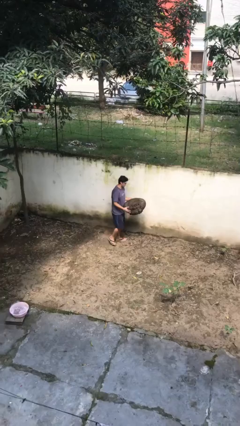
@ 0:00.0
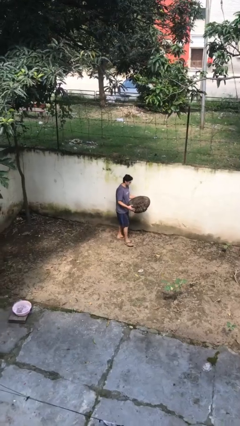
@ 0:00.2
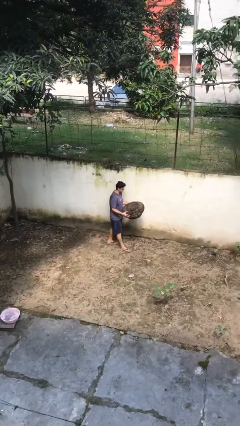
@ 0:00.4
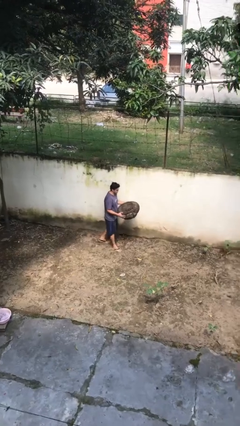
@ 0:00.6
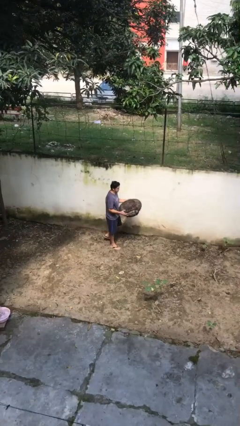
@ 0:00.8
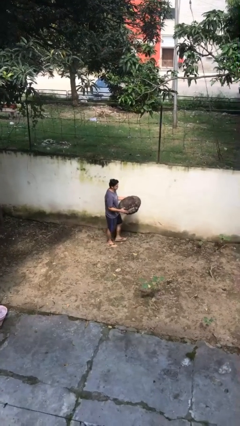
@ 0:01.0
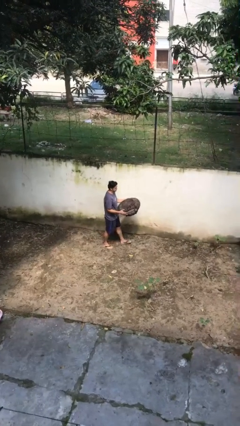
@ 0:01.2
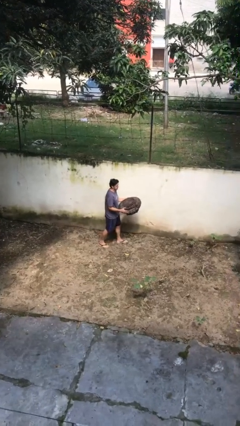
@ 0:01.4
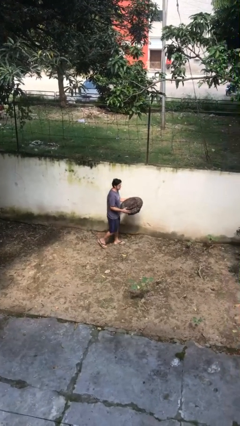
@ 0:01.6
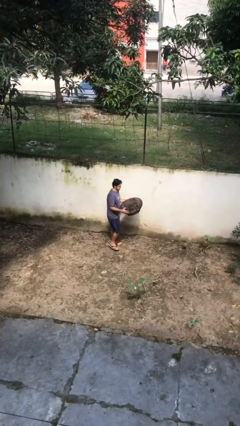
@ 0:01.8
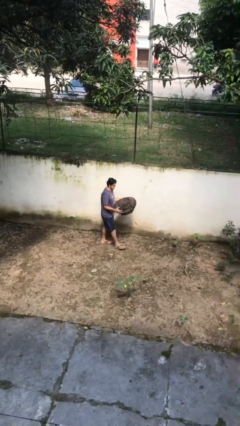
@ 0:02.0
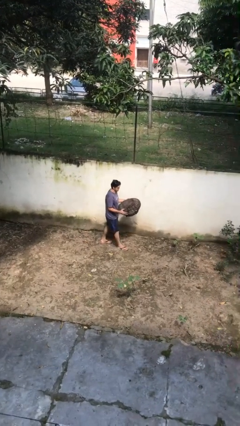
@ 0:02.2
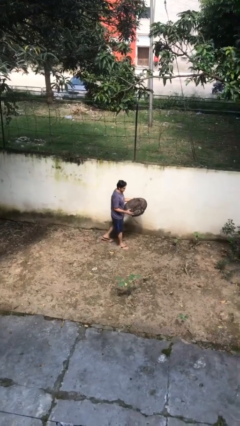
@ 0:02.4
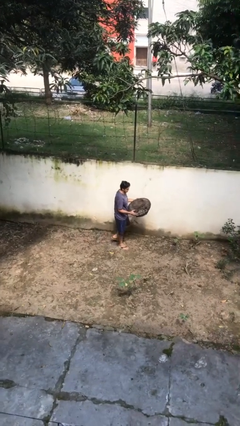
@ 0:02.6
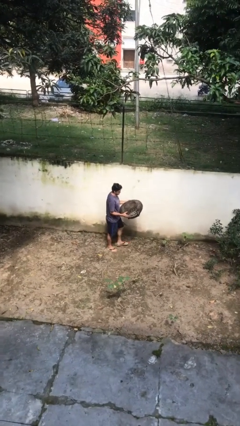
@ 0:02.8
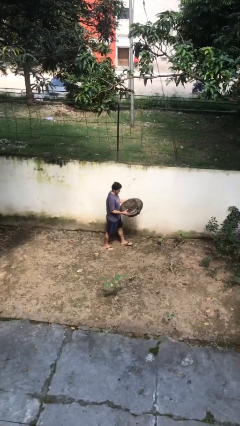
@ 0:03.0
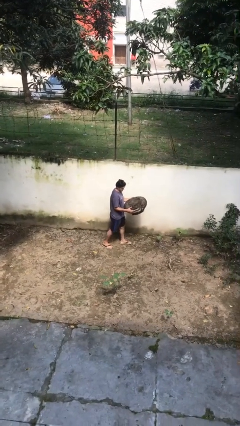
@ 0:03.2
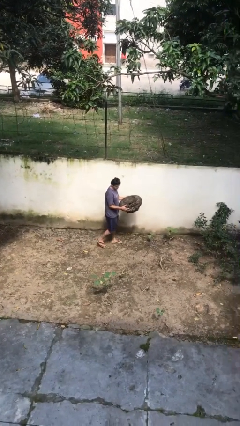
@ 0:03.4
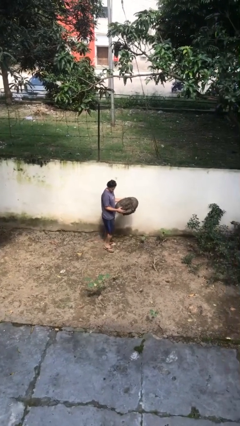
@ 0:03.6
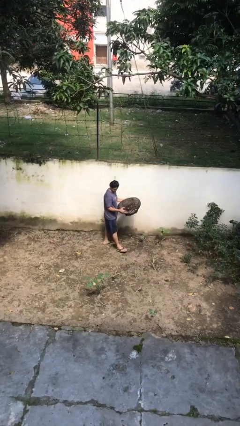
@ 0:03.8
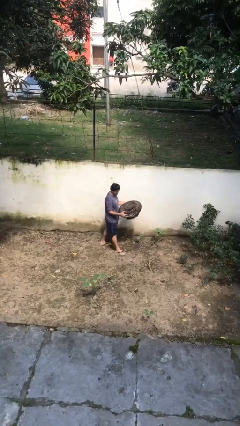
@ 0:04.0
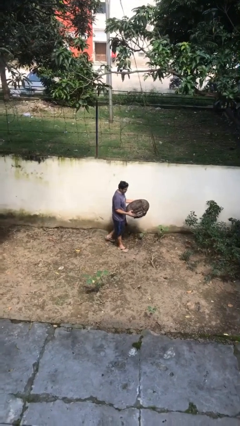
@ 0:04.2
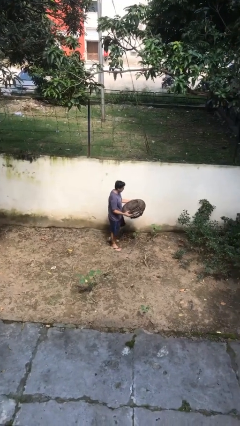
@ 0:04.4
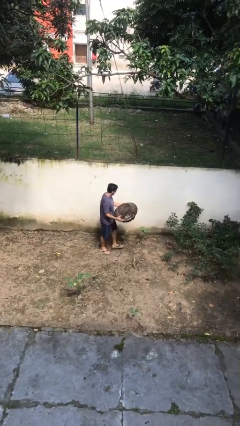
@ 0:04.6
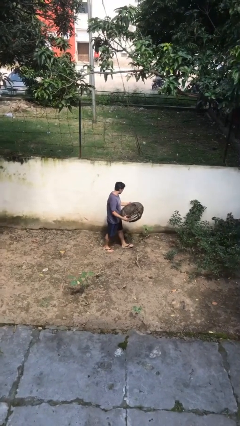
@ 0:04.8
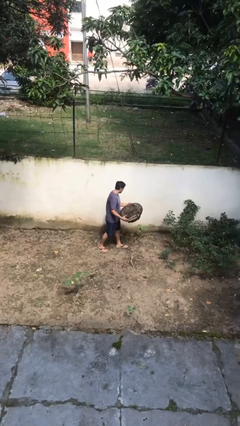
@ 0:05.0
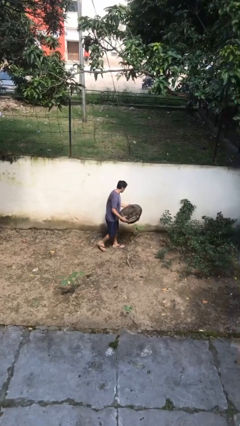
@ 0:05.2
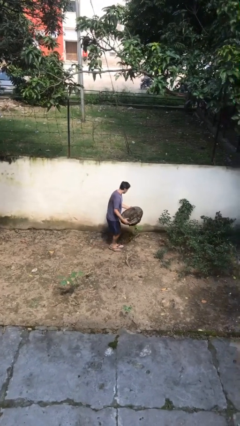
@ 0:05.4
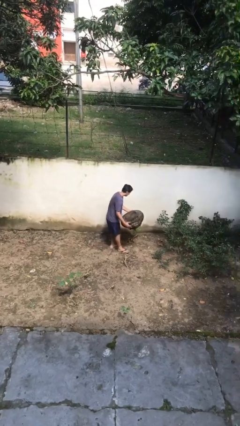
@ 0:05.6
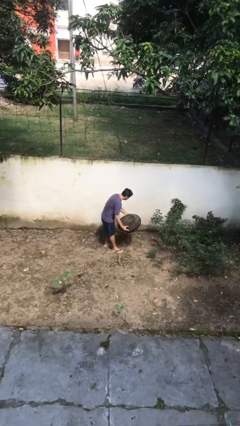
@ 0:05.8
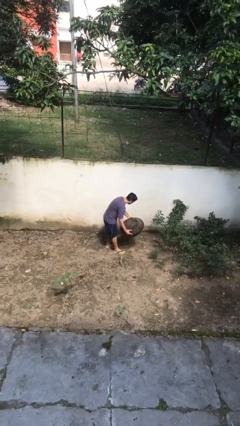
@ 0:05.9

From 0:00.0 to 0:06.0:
person carries heavy object

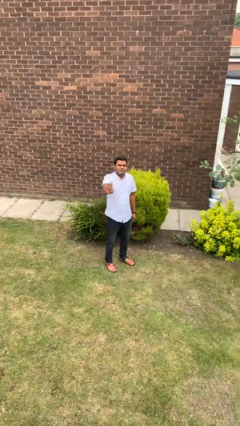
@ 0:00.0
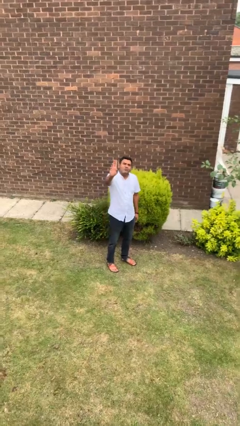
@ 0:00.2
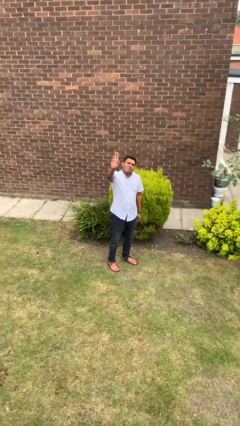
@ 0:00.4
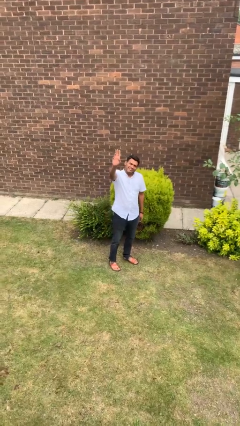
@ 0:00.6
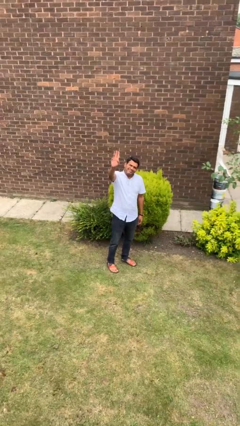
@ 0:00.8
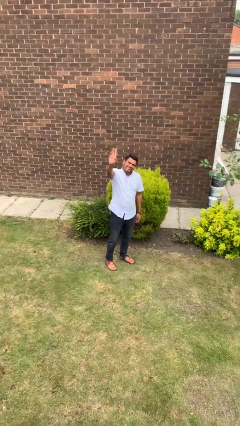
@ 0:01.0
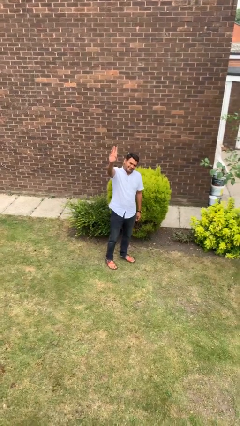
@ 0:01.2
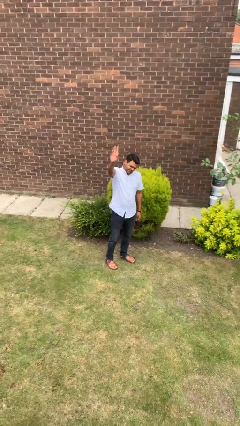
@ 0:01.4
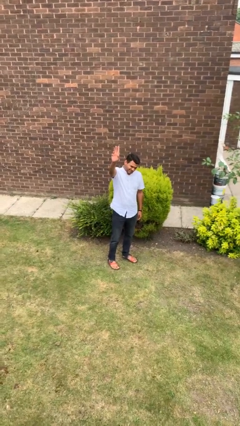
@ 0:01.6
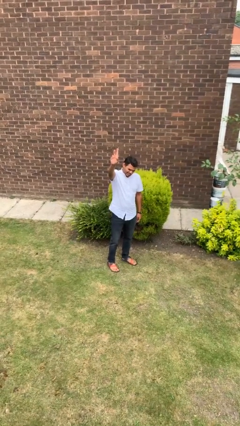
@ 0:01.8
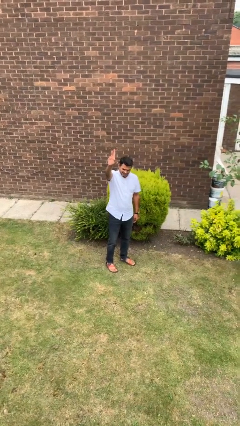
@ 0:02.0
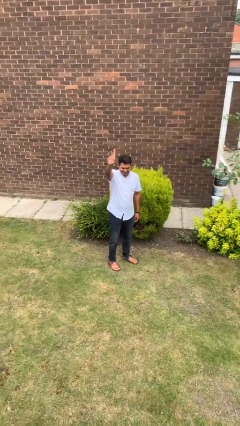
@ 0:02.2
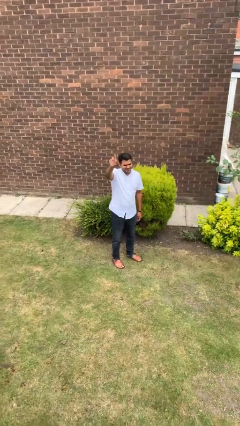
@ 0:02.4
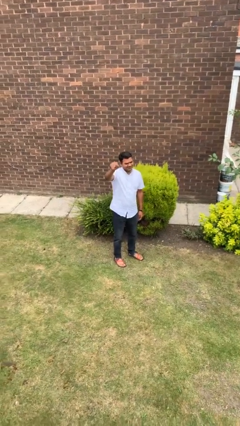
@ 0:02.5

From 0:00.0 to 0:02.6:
person gestures raise hand

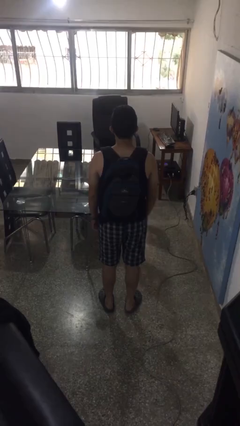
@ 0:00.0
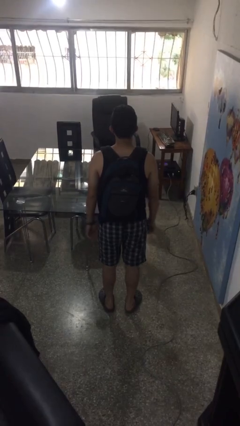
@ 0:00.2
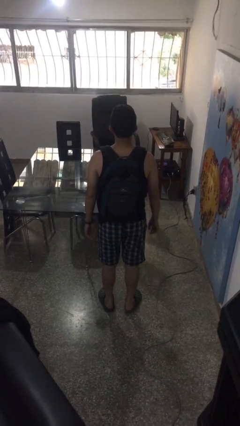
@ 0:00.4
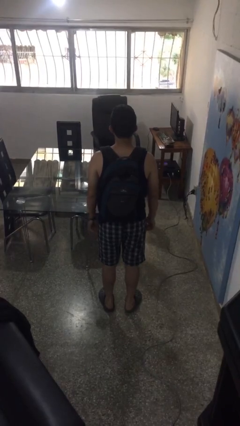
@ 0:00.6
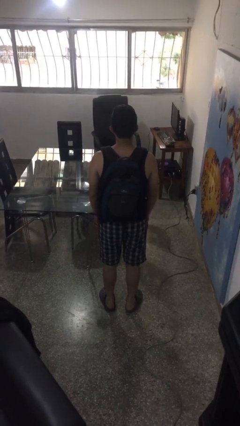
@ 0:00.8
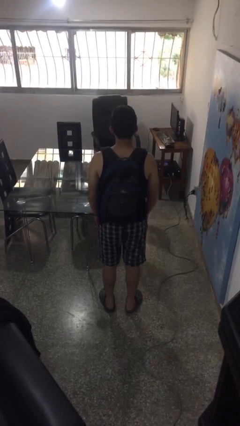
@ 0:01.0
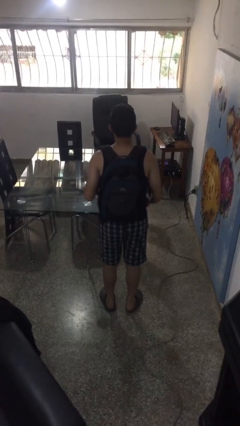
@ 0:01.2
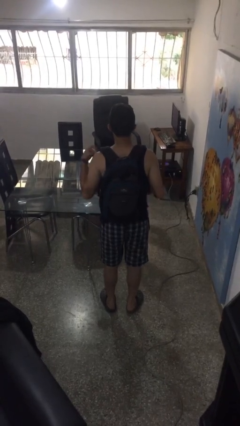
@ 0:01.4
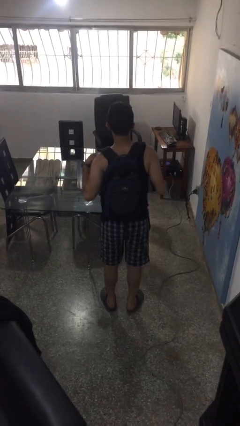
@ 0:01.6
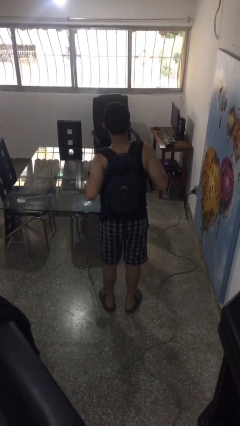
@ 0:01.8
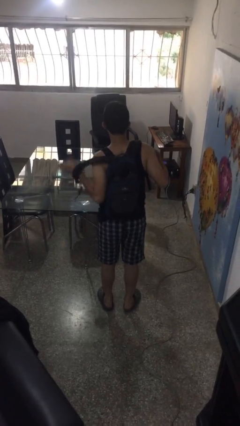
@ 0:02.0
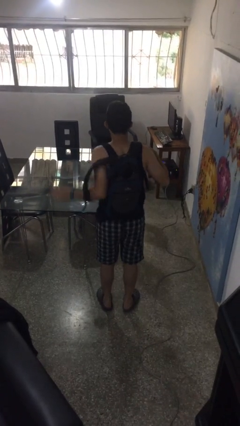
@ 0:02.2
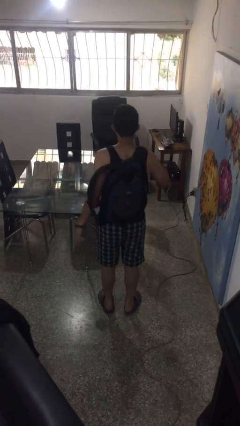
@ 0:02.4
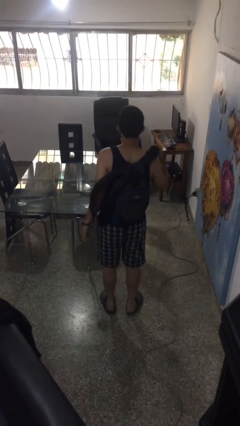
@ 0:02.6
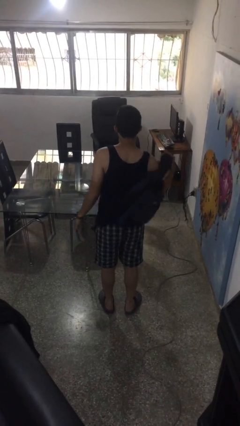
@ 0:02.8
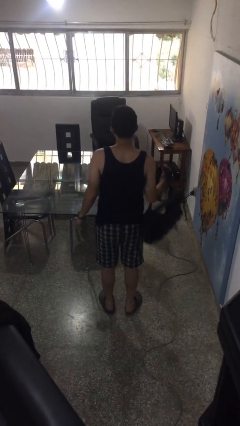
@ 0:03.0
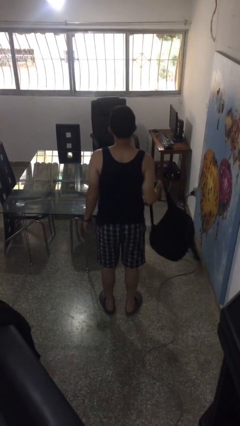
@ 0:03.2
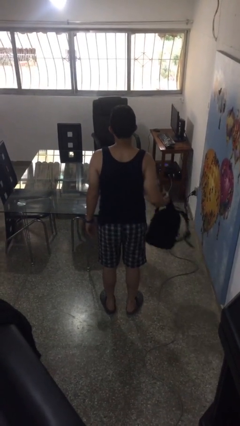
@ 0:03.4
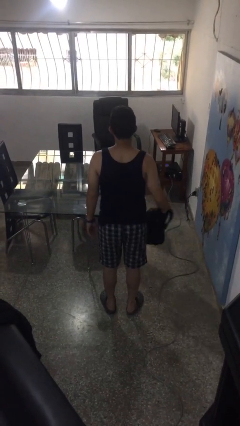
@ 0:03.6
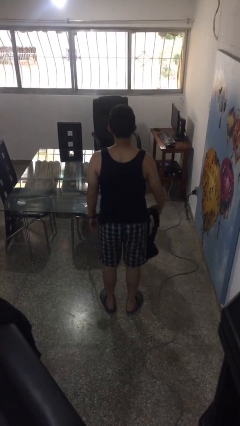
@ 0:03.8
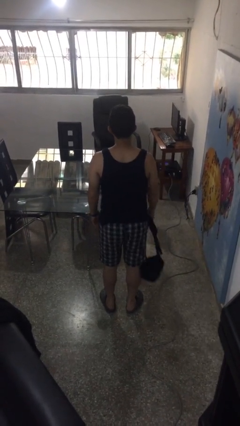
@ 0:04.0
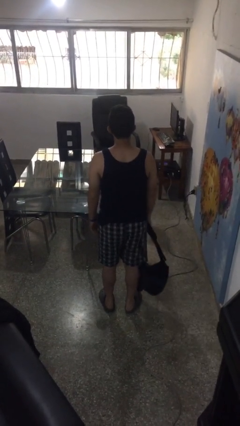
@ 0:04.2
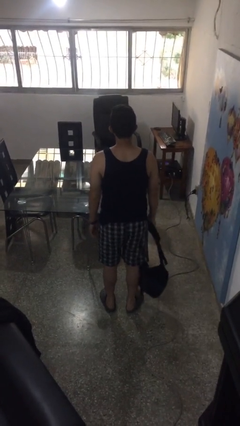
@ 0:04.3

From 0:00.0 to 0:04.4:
person takes off backpack

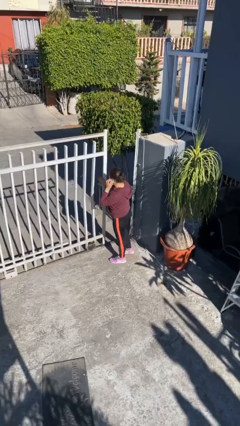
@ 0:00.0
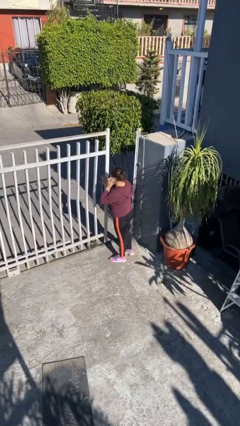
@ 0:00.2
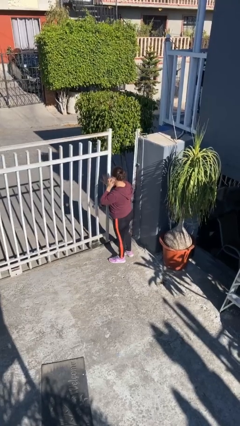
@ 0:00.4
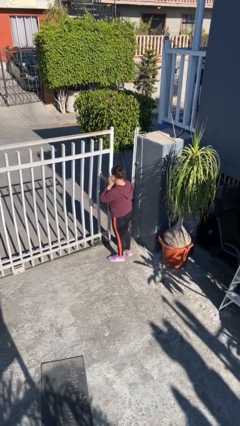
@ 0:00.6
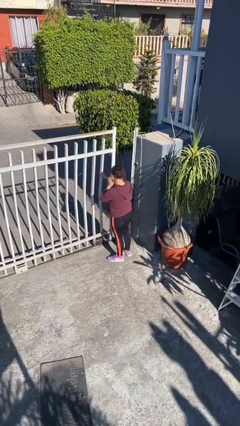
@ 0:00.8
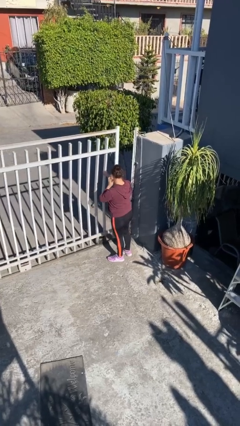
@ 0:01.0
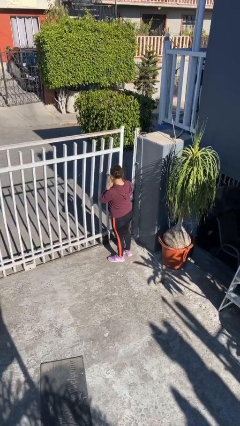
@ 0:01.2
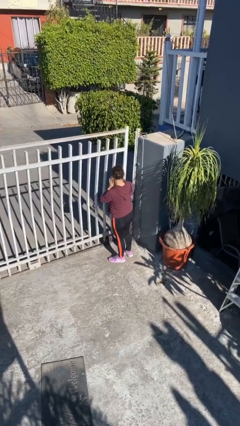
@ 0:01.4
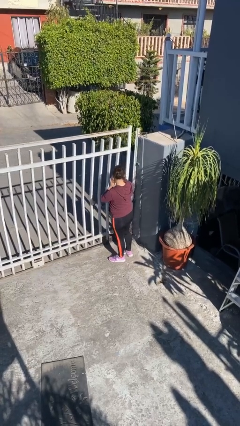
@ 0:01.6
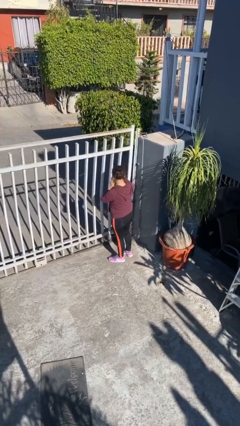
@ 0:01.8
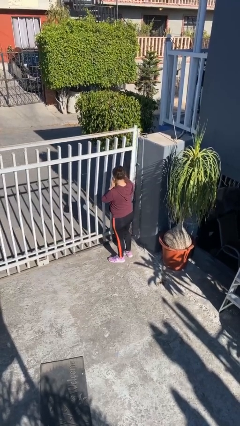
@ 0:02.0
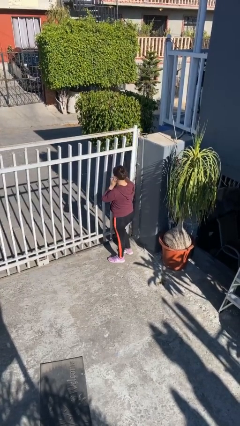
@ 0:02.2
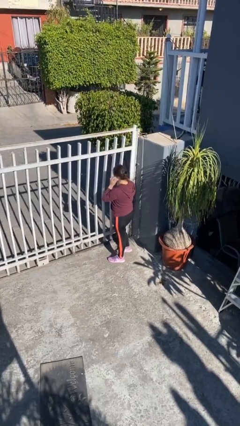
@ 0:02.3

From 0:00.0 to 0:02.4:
person closes facility door

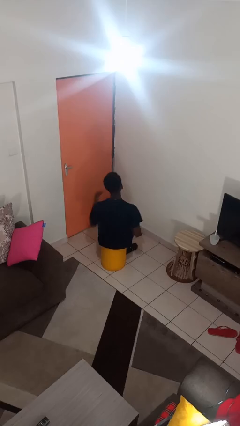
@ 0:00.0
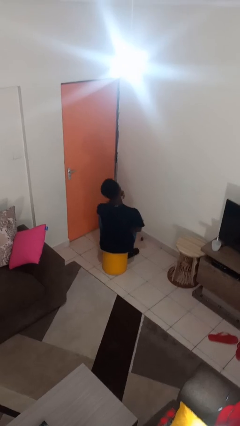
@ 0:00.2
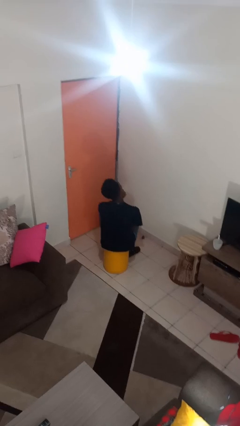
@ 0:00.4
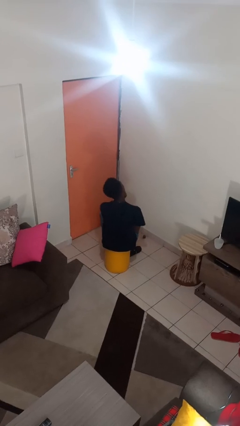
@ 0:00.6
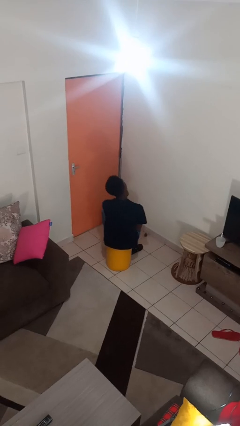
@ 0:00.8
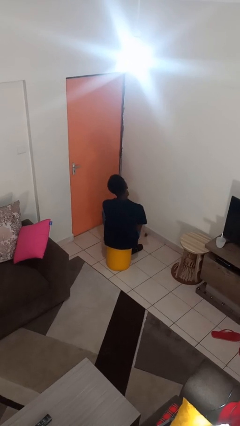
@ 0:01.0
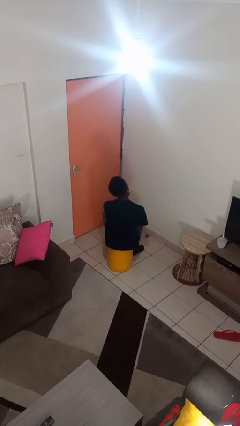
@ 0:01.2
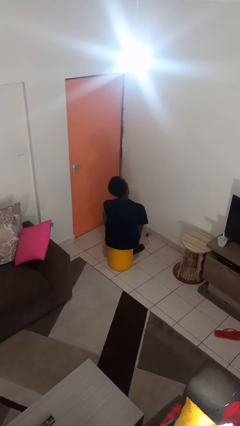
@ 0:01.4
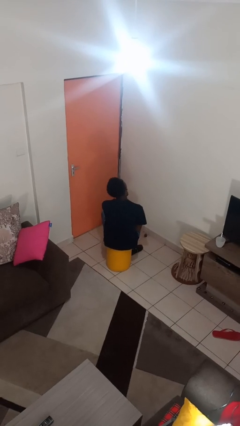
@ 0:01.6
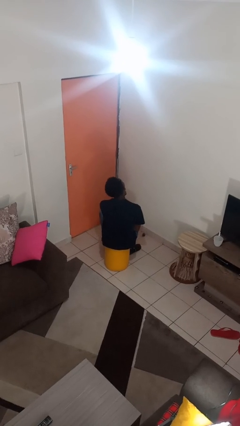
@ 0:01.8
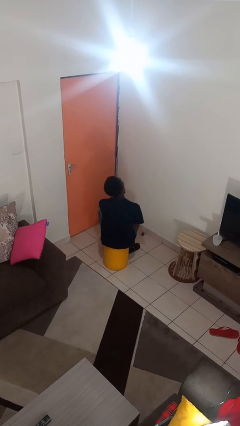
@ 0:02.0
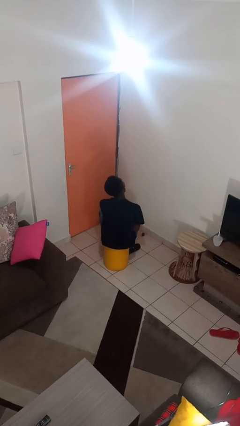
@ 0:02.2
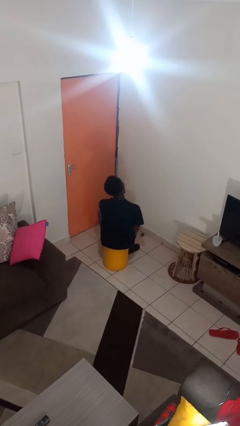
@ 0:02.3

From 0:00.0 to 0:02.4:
person strokes chin
